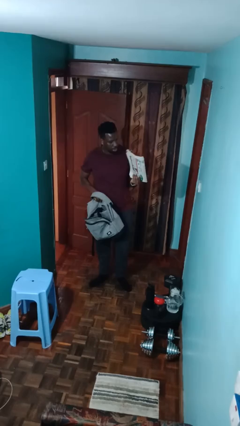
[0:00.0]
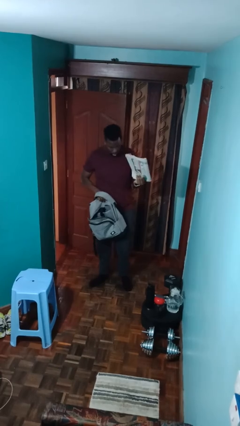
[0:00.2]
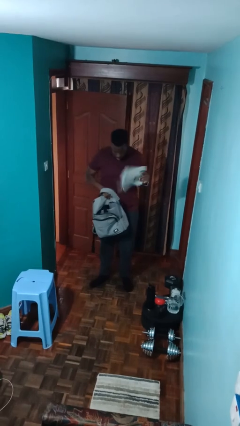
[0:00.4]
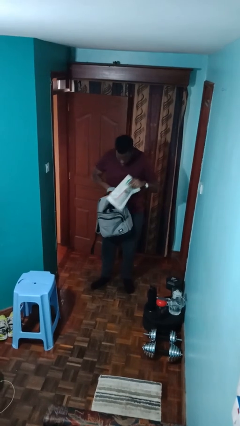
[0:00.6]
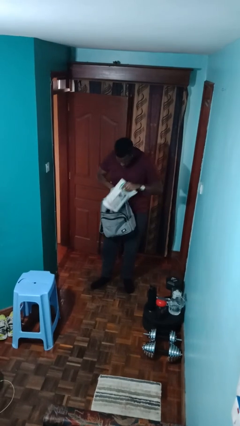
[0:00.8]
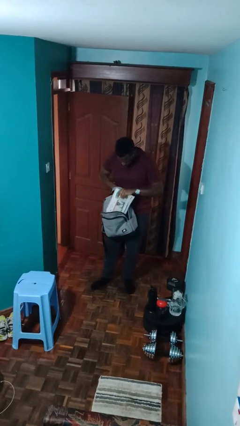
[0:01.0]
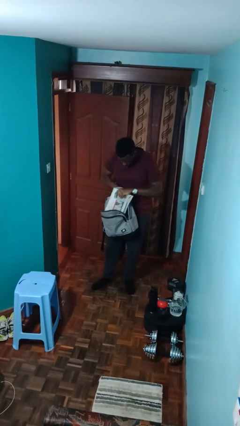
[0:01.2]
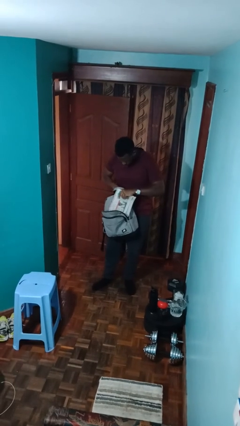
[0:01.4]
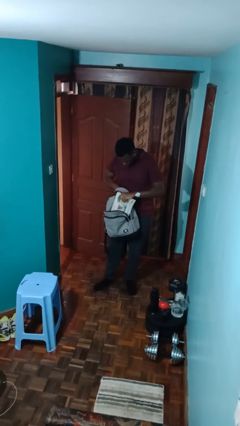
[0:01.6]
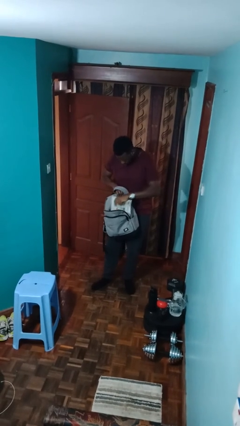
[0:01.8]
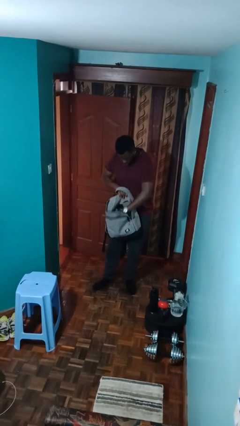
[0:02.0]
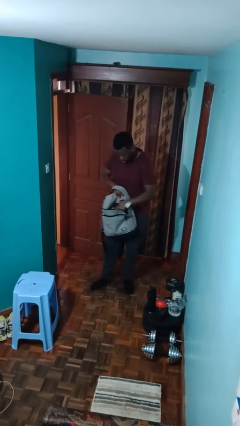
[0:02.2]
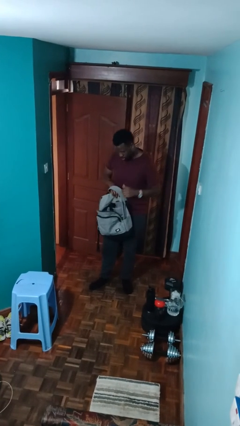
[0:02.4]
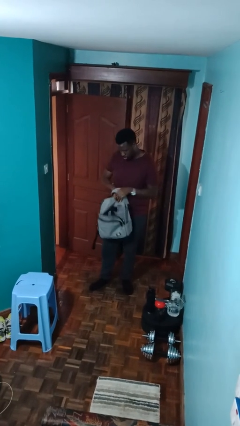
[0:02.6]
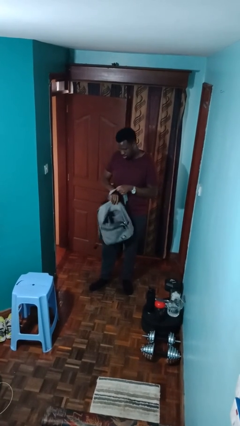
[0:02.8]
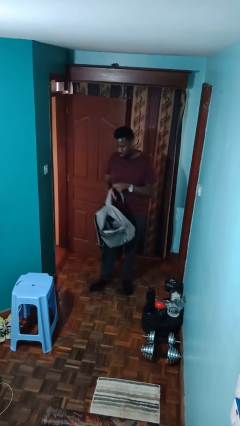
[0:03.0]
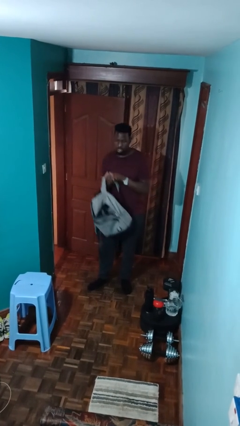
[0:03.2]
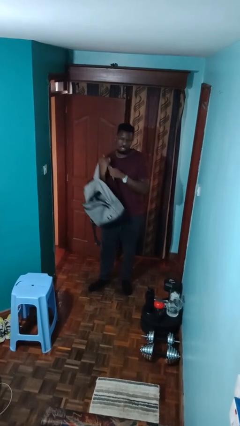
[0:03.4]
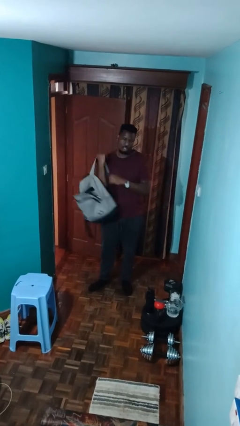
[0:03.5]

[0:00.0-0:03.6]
person puts object into backpack

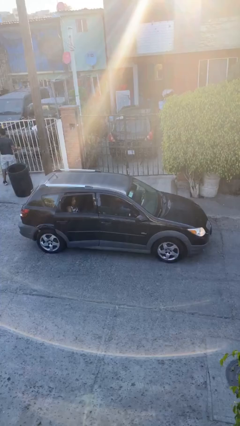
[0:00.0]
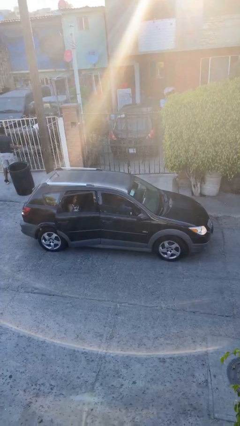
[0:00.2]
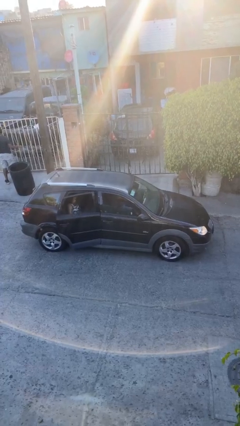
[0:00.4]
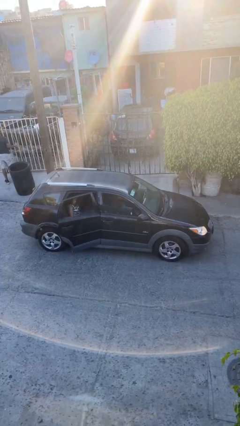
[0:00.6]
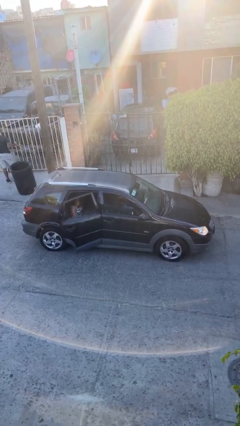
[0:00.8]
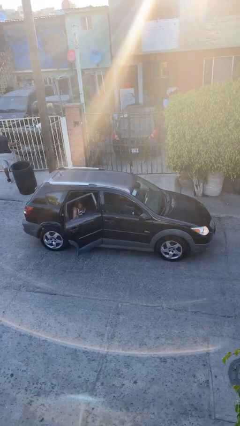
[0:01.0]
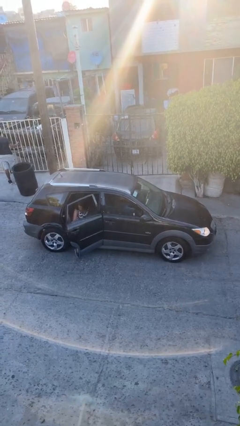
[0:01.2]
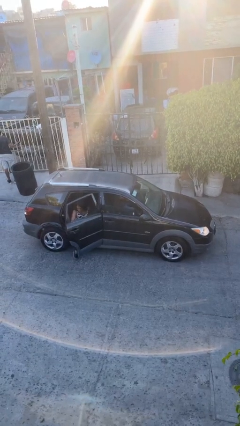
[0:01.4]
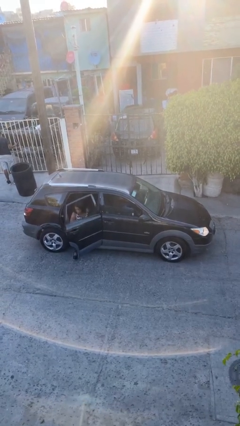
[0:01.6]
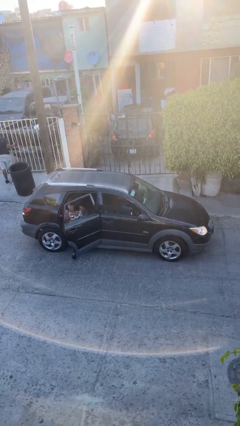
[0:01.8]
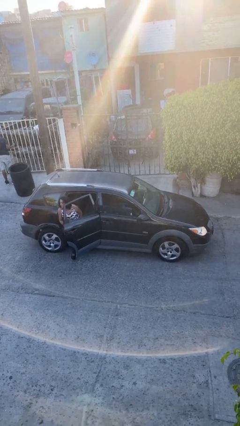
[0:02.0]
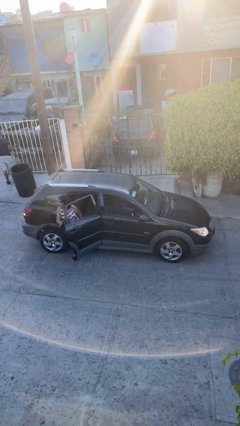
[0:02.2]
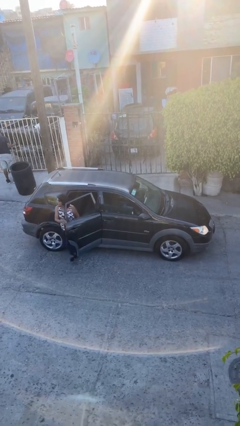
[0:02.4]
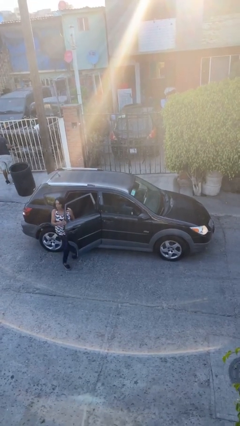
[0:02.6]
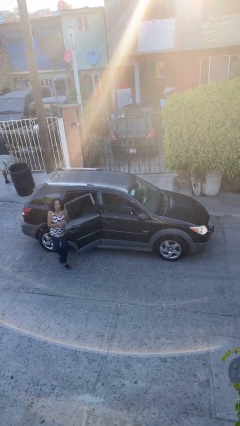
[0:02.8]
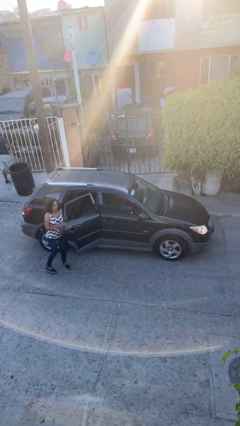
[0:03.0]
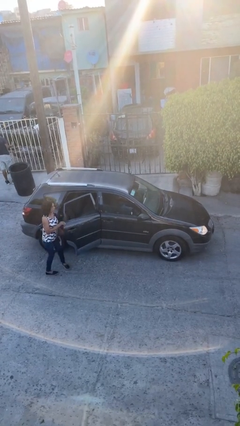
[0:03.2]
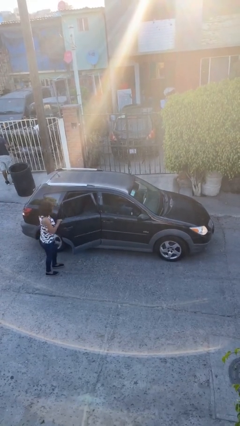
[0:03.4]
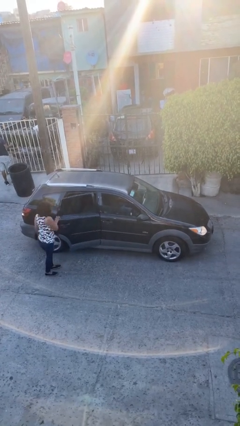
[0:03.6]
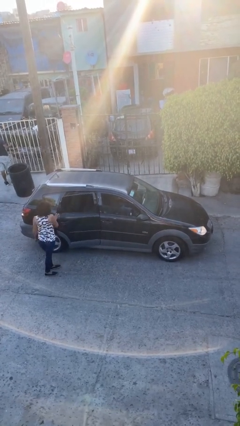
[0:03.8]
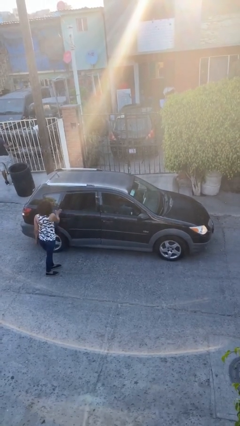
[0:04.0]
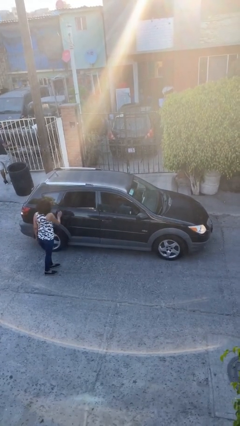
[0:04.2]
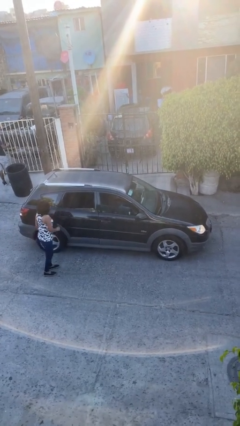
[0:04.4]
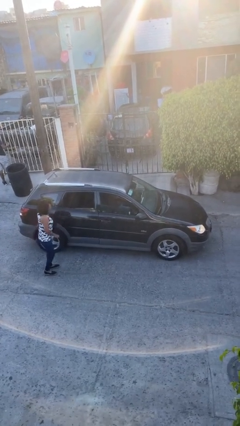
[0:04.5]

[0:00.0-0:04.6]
car drops off person

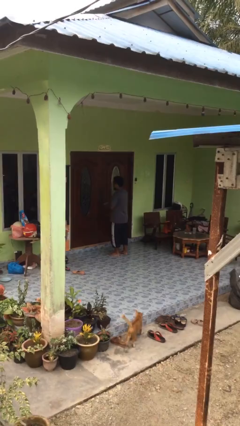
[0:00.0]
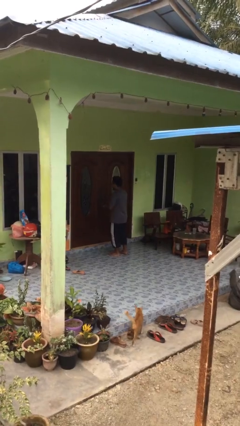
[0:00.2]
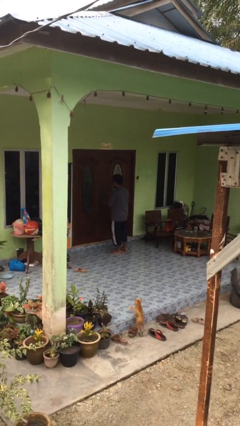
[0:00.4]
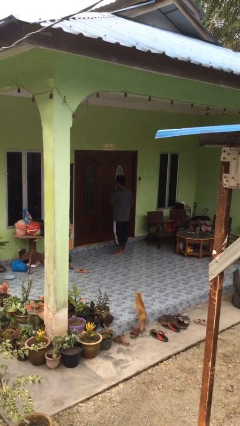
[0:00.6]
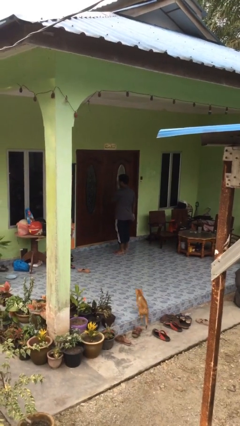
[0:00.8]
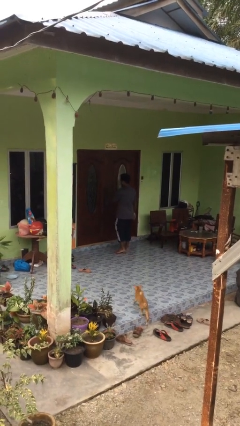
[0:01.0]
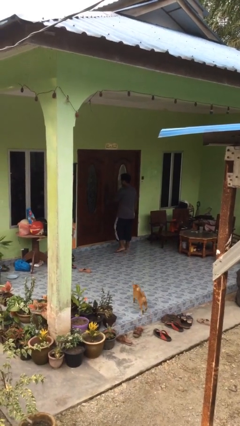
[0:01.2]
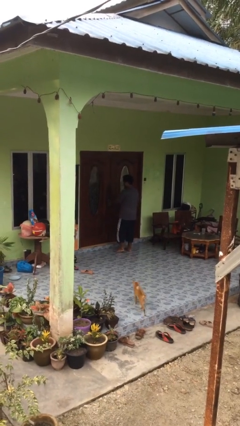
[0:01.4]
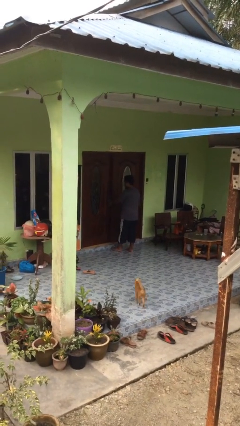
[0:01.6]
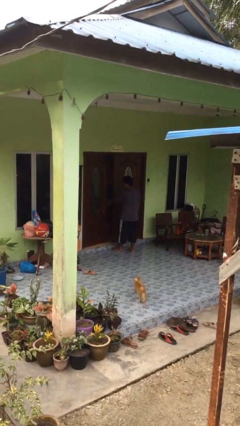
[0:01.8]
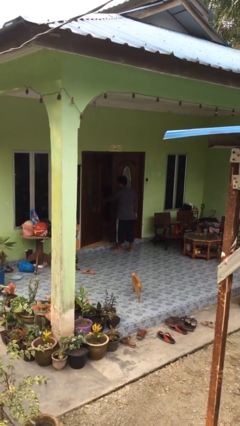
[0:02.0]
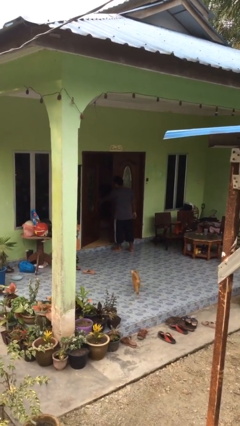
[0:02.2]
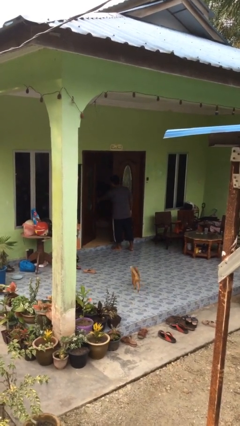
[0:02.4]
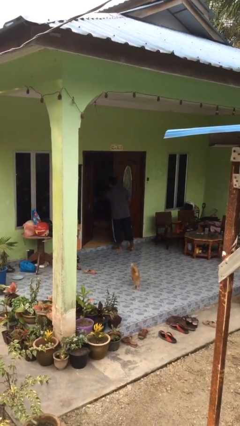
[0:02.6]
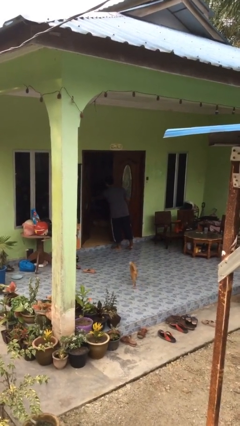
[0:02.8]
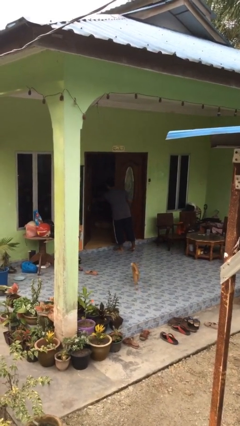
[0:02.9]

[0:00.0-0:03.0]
person opens facility door

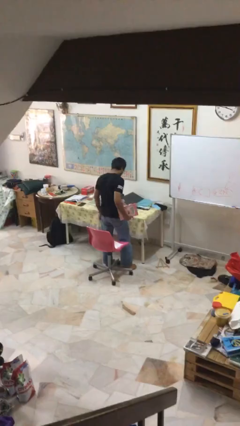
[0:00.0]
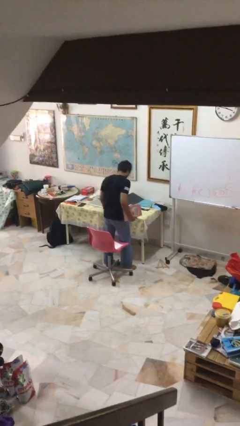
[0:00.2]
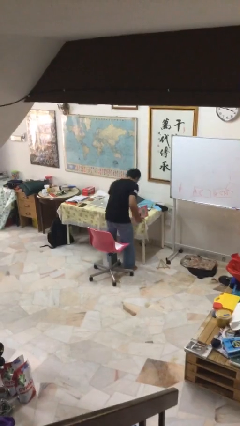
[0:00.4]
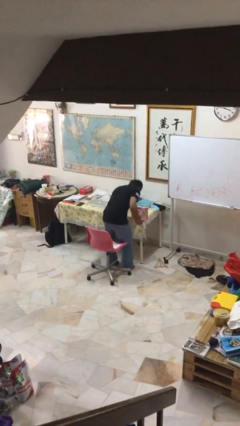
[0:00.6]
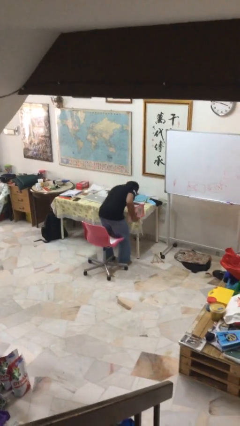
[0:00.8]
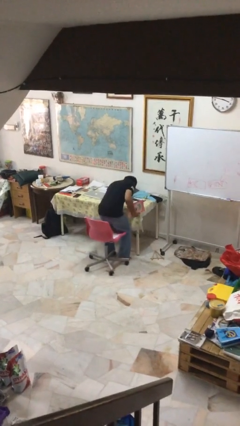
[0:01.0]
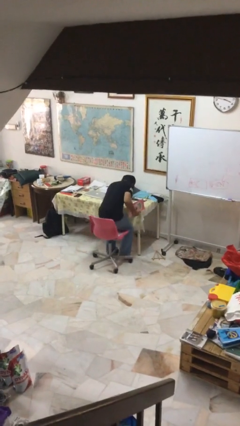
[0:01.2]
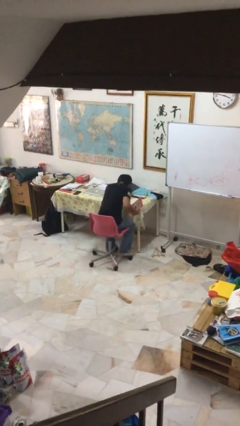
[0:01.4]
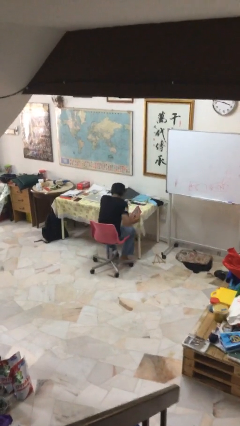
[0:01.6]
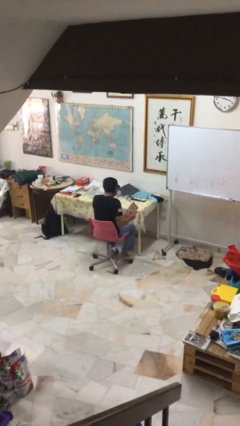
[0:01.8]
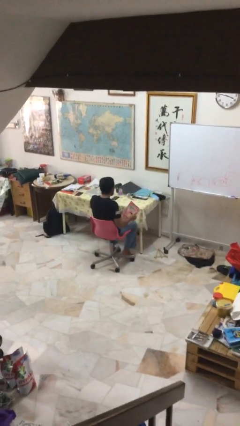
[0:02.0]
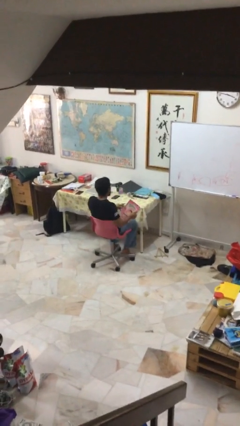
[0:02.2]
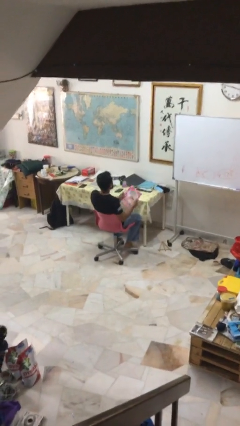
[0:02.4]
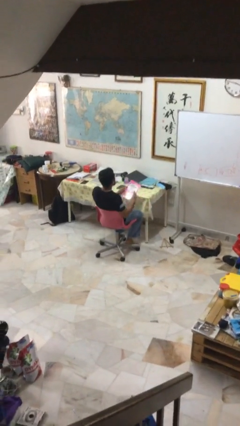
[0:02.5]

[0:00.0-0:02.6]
person sits down

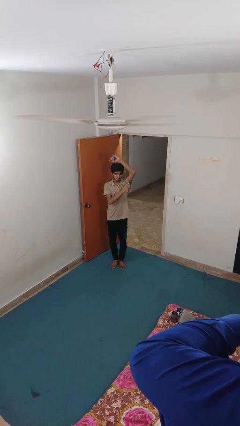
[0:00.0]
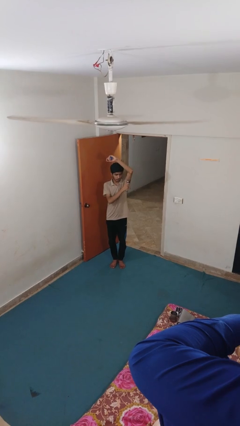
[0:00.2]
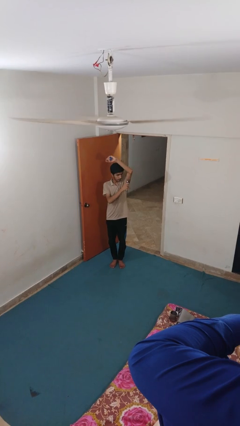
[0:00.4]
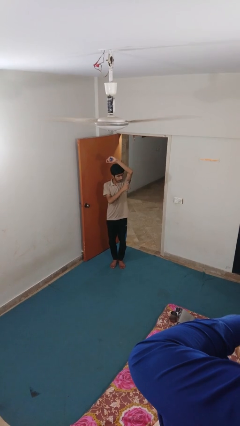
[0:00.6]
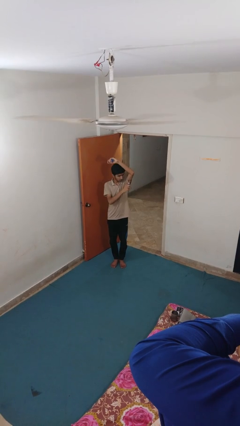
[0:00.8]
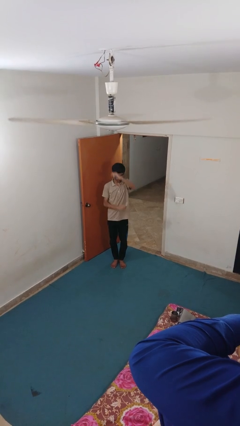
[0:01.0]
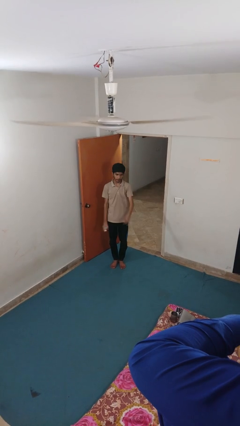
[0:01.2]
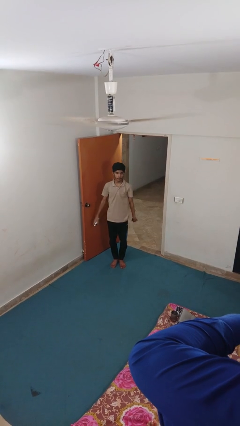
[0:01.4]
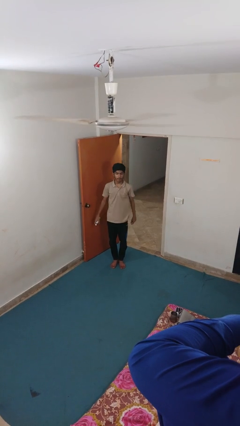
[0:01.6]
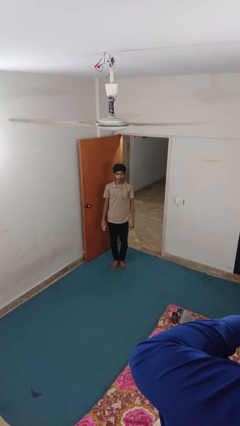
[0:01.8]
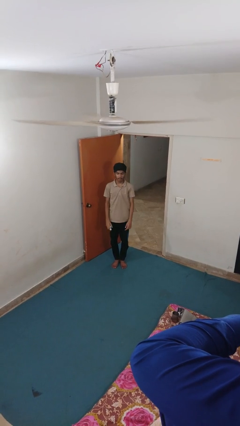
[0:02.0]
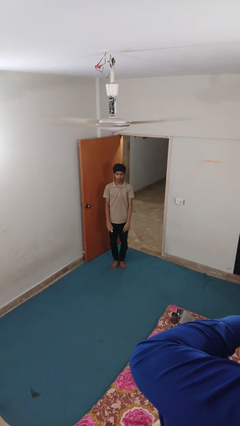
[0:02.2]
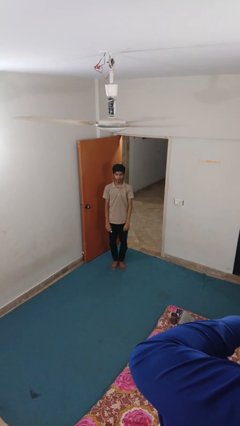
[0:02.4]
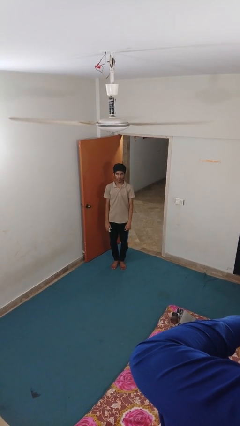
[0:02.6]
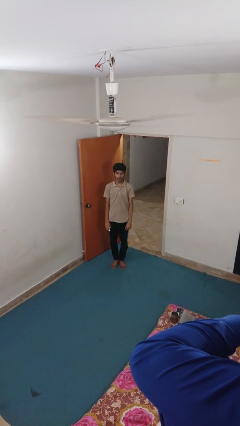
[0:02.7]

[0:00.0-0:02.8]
person applies deodorant

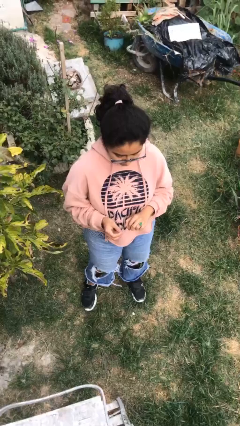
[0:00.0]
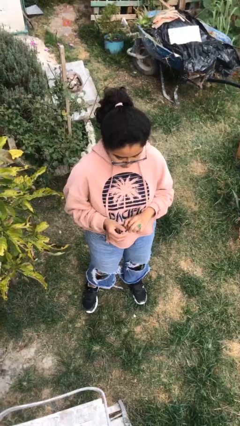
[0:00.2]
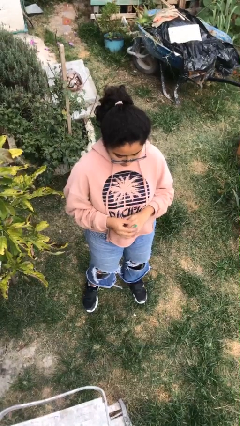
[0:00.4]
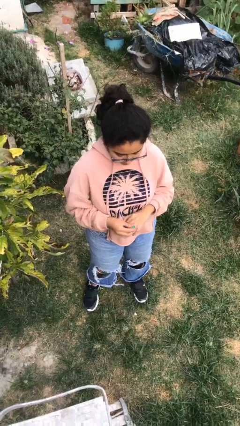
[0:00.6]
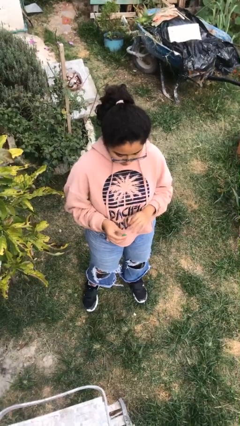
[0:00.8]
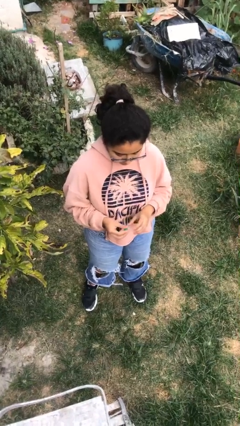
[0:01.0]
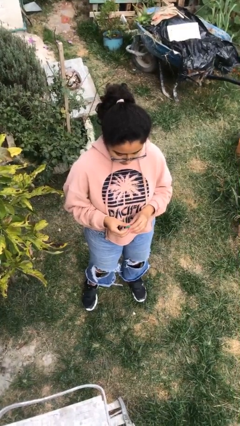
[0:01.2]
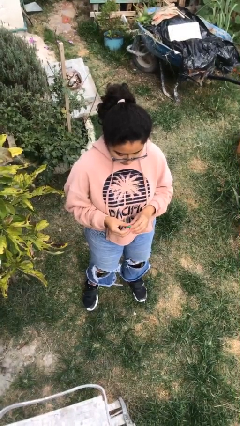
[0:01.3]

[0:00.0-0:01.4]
person takes off ring
